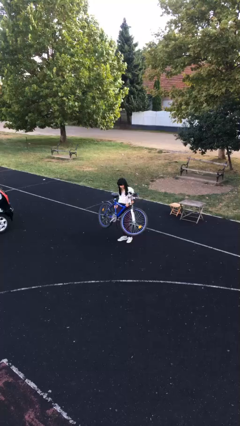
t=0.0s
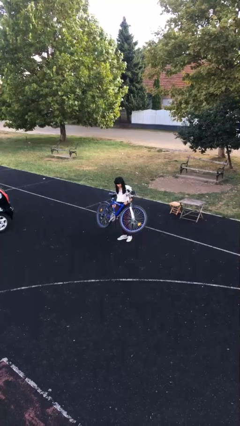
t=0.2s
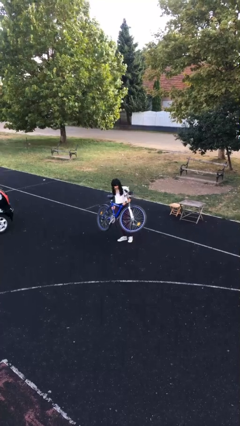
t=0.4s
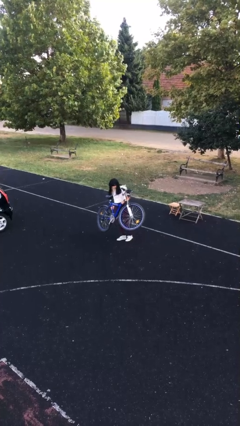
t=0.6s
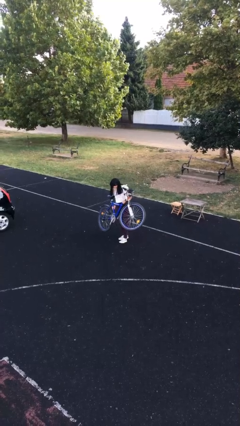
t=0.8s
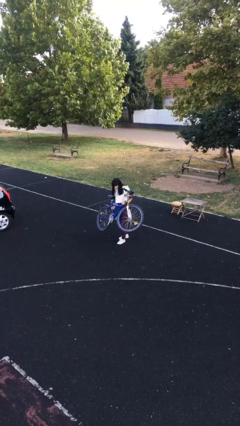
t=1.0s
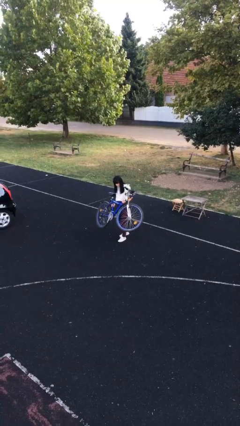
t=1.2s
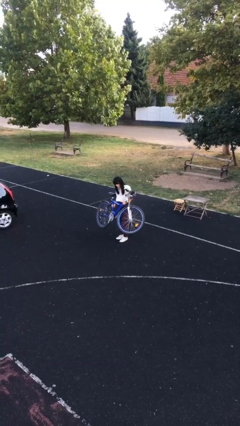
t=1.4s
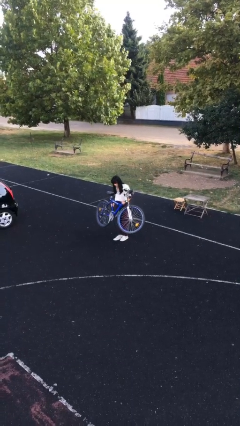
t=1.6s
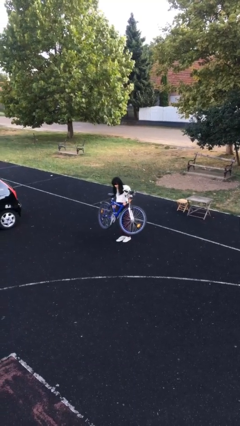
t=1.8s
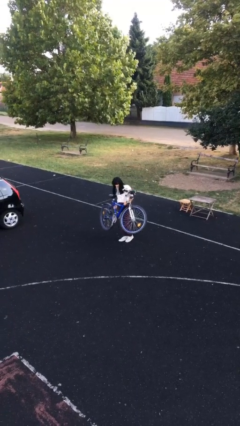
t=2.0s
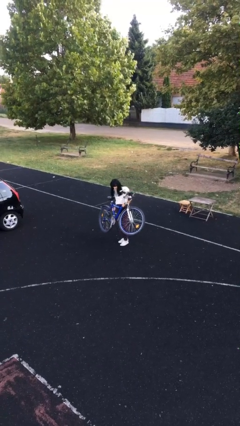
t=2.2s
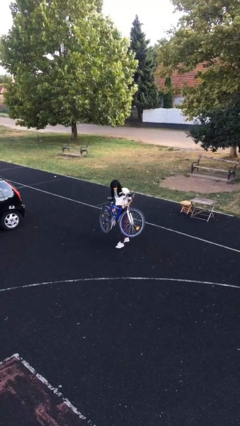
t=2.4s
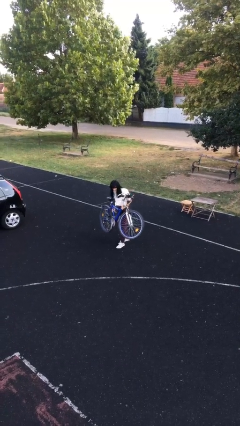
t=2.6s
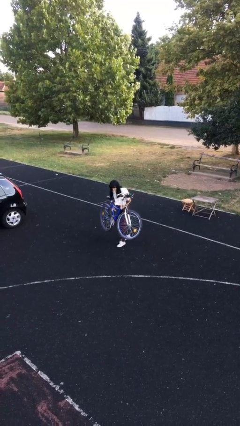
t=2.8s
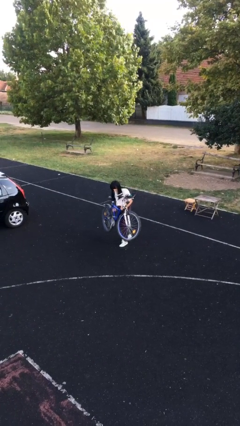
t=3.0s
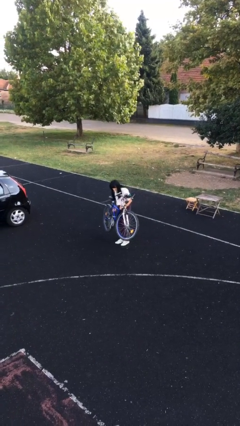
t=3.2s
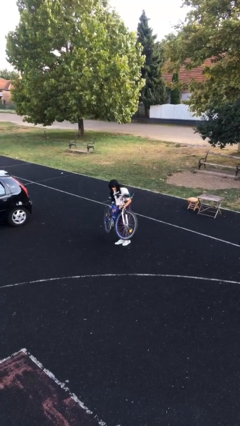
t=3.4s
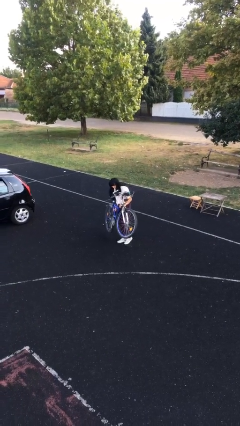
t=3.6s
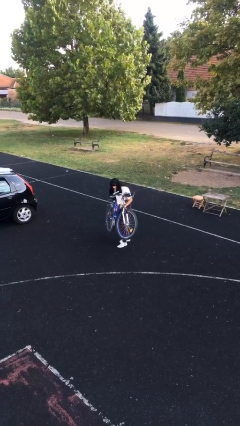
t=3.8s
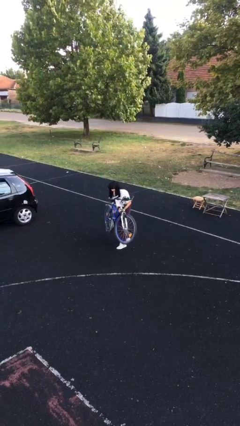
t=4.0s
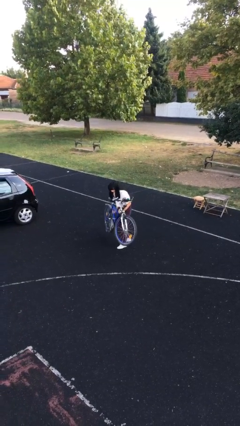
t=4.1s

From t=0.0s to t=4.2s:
person carries heavy object

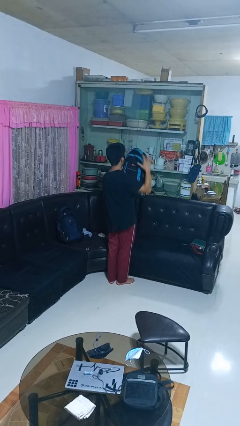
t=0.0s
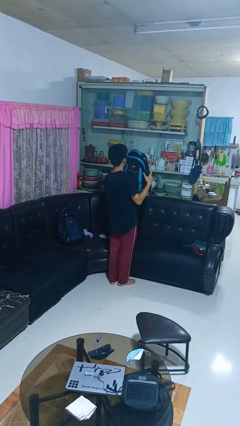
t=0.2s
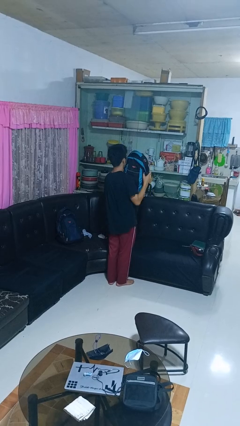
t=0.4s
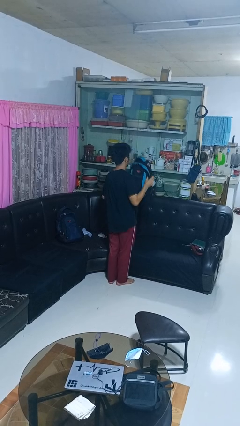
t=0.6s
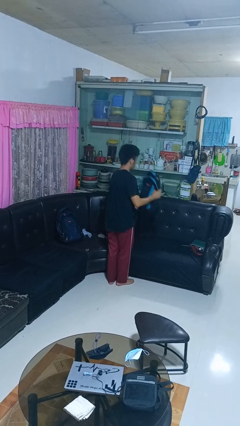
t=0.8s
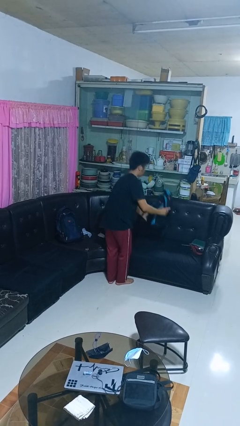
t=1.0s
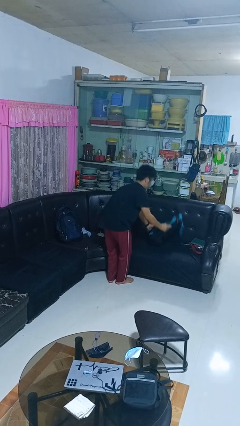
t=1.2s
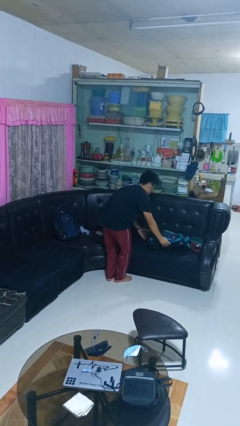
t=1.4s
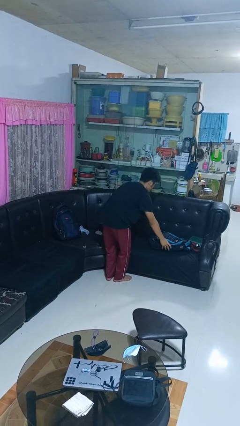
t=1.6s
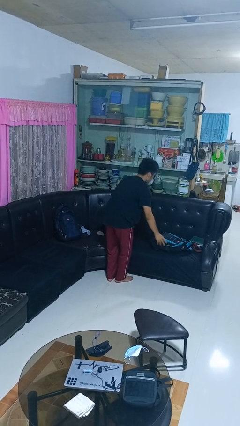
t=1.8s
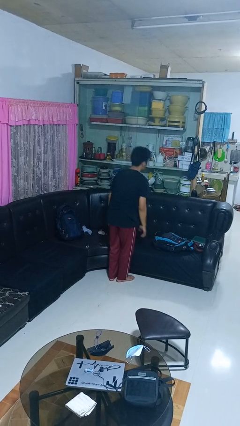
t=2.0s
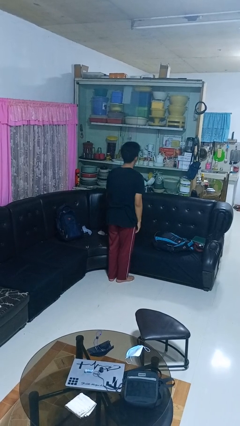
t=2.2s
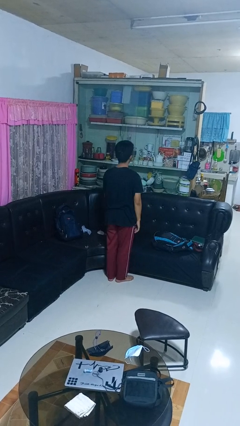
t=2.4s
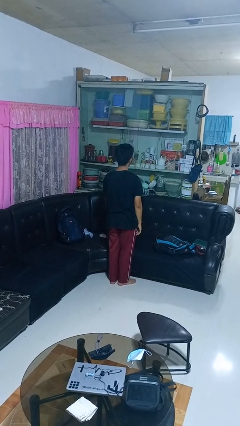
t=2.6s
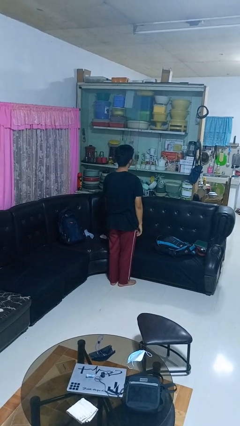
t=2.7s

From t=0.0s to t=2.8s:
person puts down object on couch

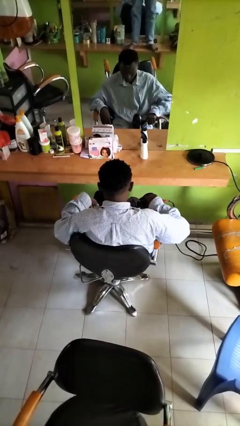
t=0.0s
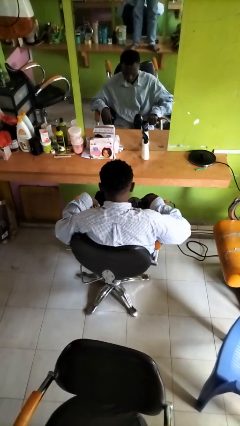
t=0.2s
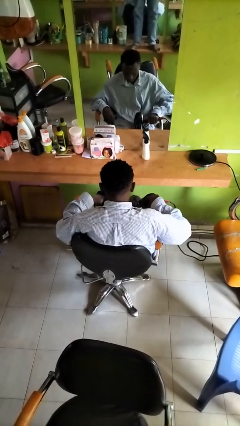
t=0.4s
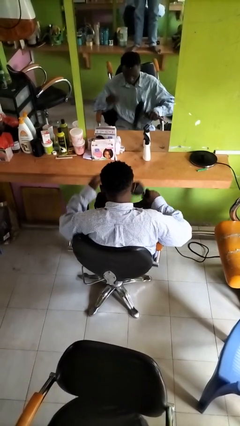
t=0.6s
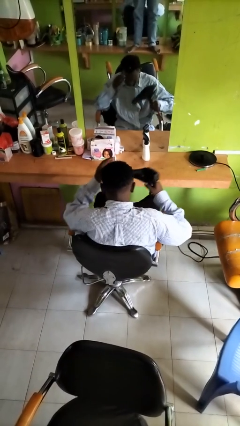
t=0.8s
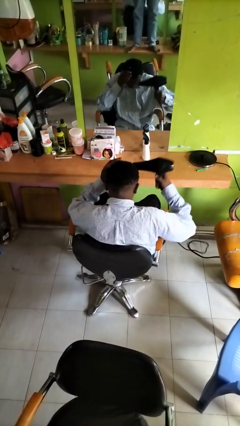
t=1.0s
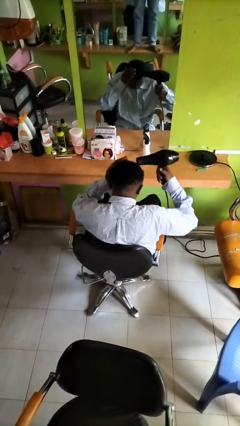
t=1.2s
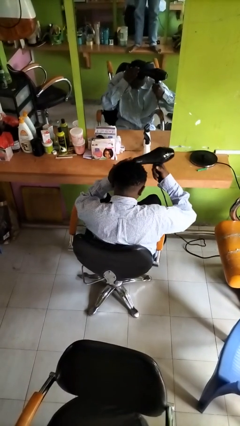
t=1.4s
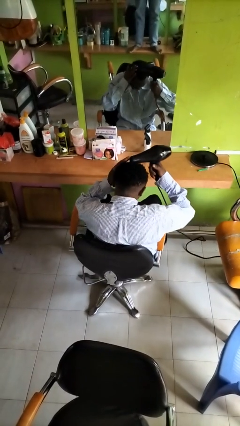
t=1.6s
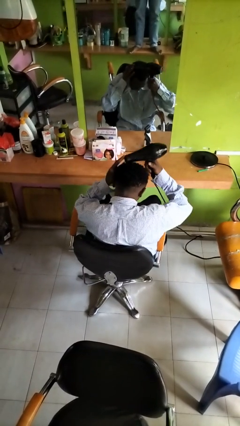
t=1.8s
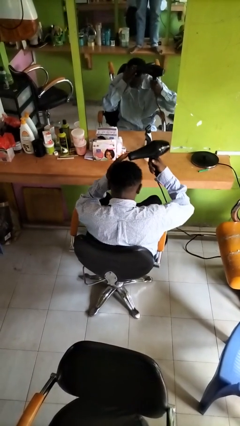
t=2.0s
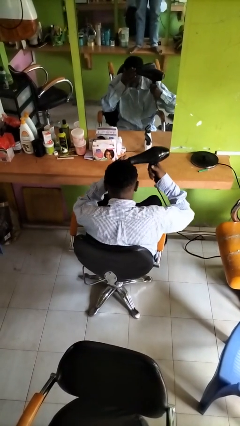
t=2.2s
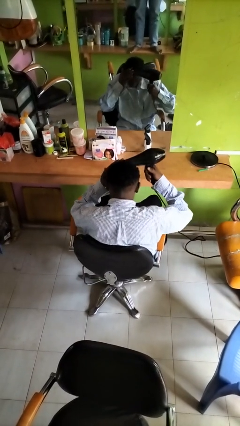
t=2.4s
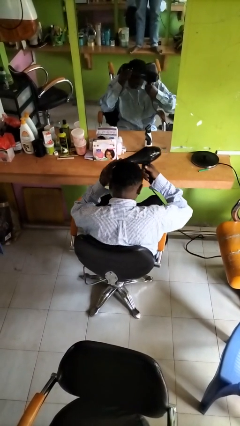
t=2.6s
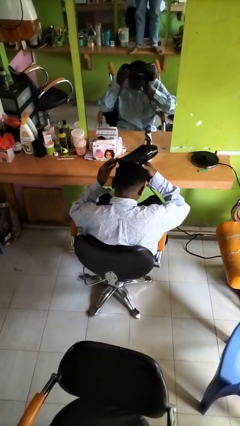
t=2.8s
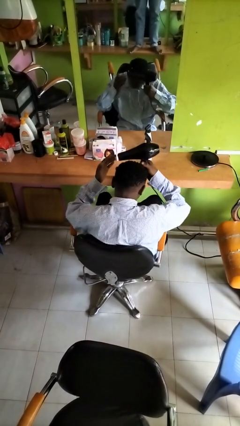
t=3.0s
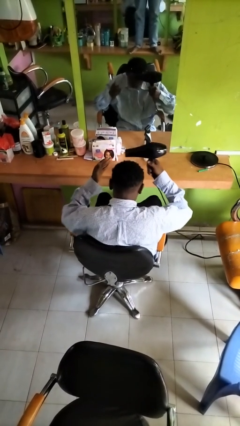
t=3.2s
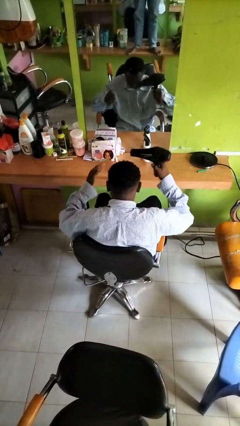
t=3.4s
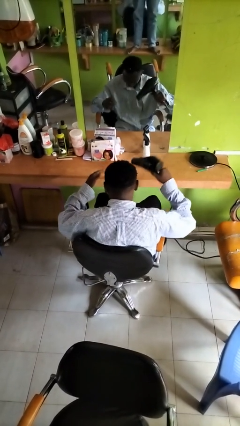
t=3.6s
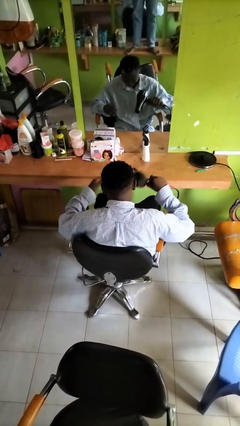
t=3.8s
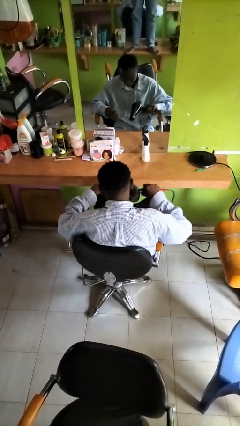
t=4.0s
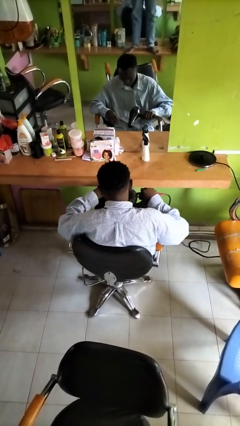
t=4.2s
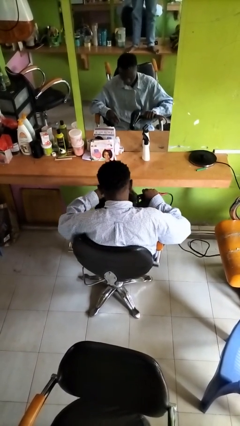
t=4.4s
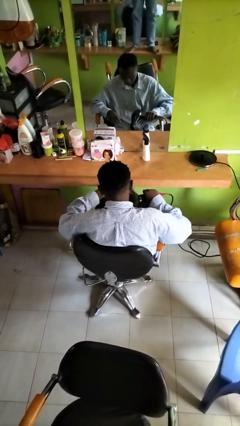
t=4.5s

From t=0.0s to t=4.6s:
person dries hair with hairdryer

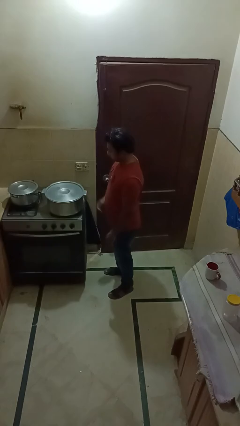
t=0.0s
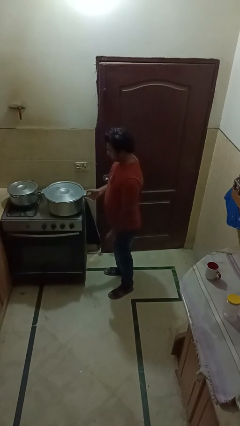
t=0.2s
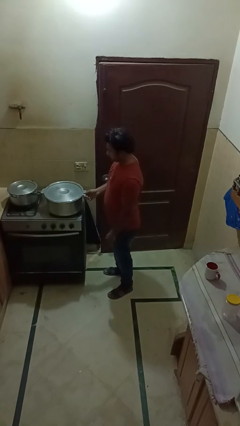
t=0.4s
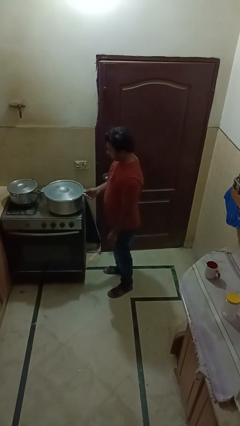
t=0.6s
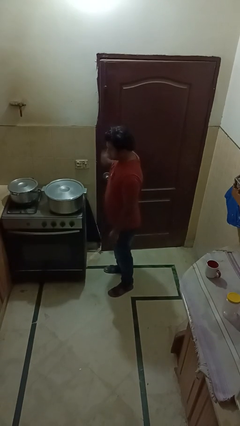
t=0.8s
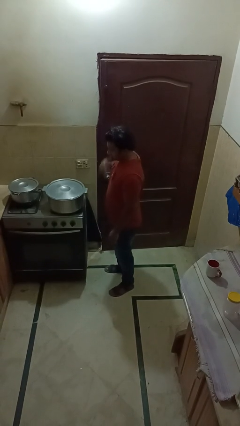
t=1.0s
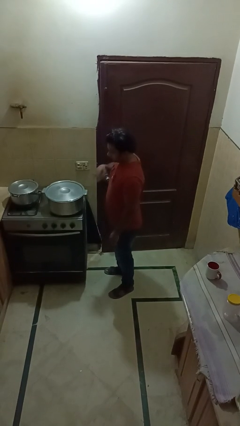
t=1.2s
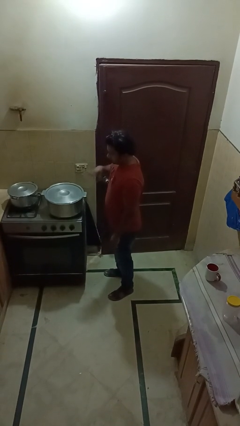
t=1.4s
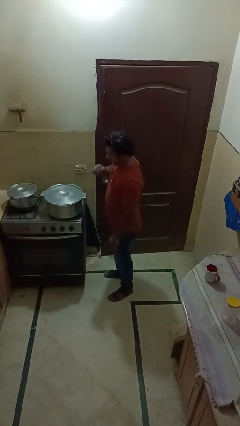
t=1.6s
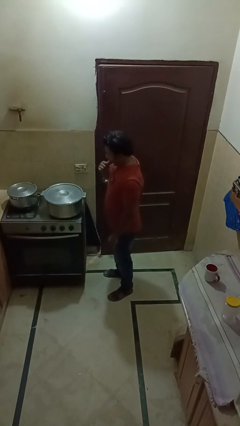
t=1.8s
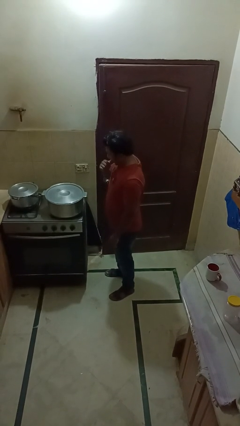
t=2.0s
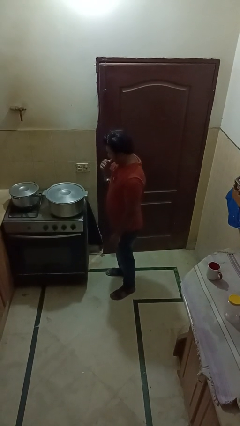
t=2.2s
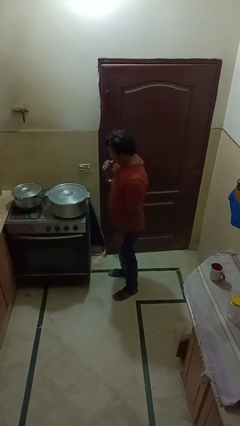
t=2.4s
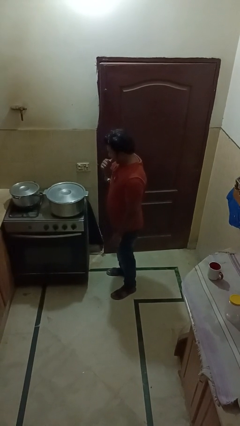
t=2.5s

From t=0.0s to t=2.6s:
person burns hand

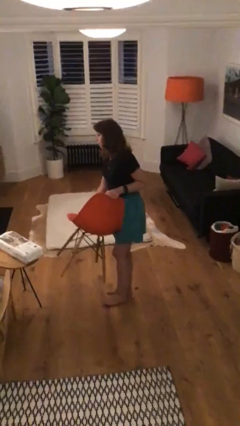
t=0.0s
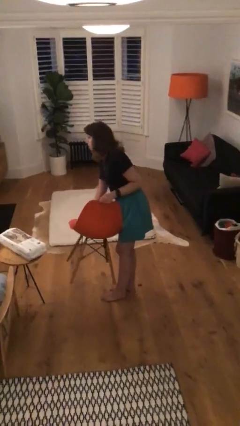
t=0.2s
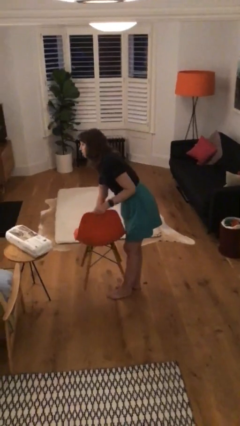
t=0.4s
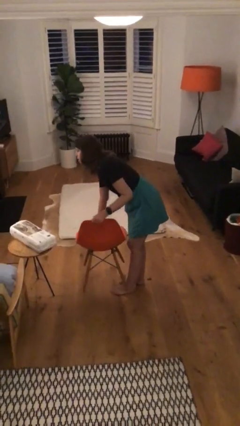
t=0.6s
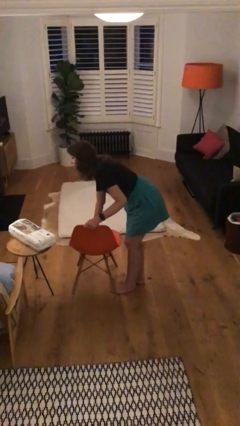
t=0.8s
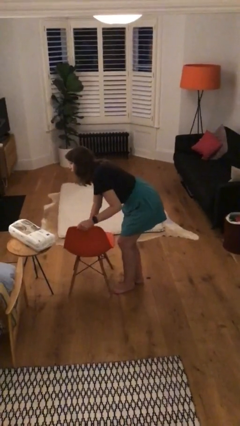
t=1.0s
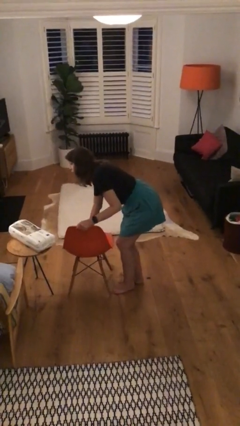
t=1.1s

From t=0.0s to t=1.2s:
person puts down object on floor

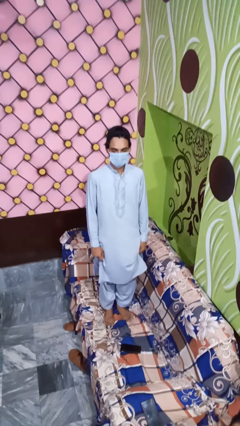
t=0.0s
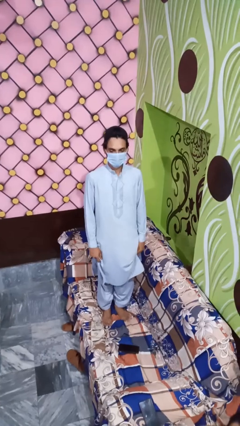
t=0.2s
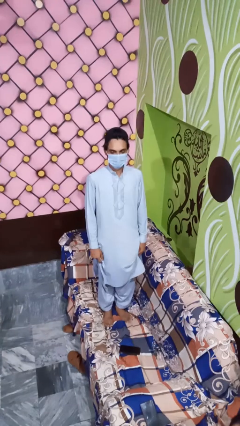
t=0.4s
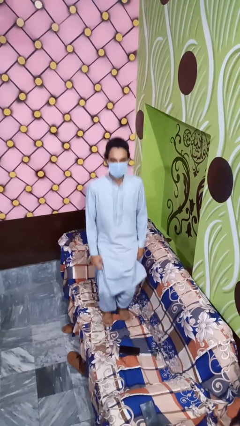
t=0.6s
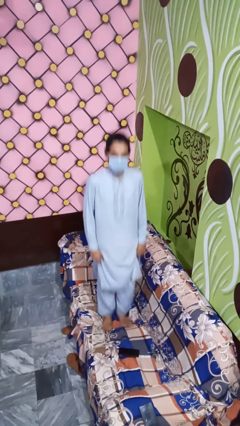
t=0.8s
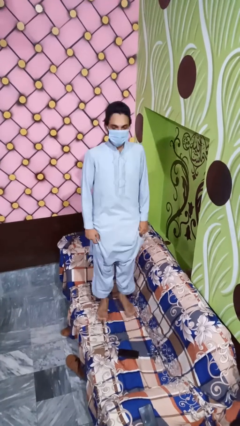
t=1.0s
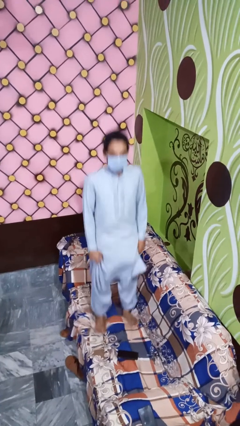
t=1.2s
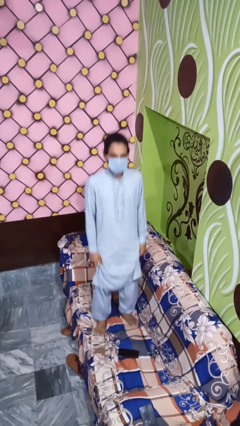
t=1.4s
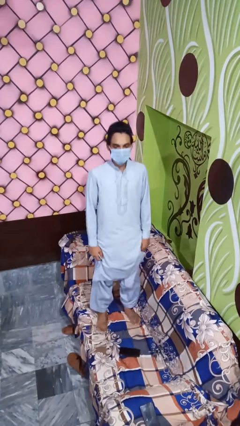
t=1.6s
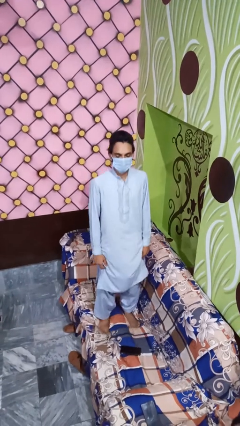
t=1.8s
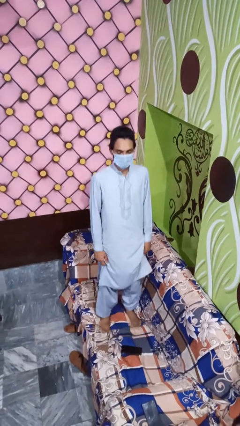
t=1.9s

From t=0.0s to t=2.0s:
person jumps on couch
